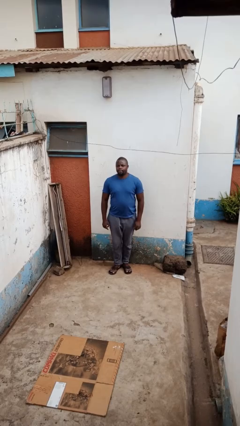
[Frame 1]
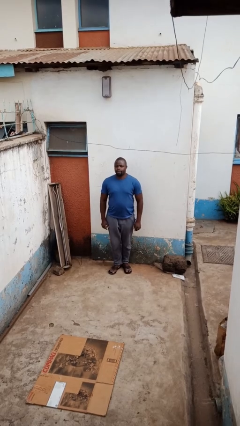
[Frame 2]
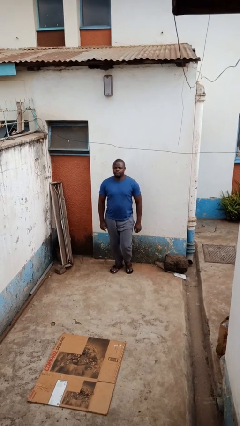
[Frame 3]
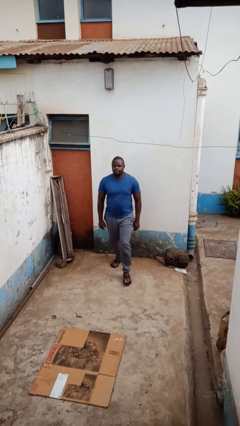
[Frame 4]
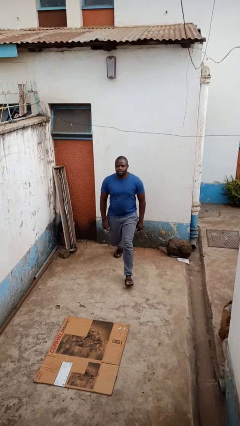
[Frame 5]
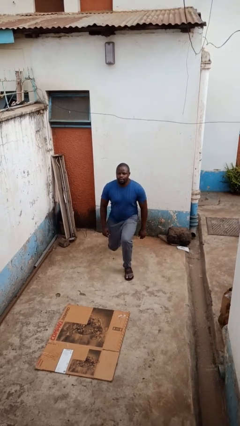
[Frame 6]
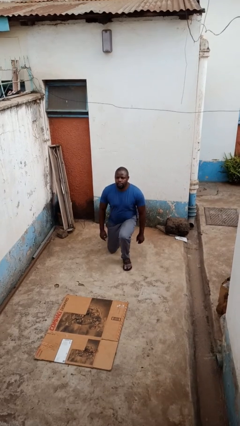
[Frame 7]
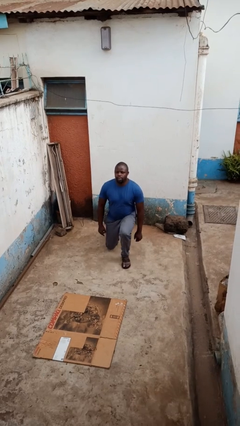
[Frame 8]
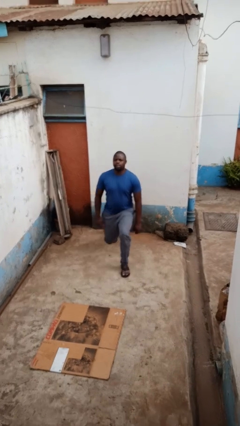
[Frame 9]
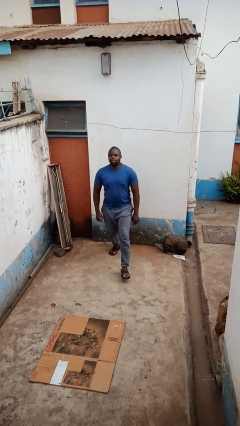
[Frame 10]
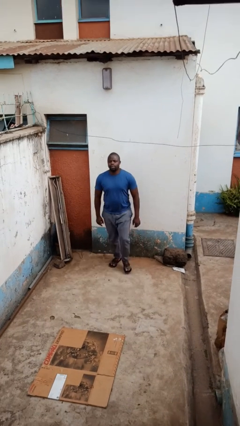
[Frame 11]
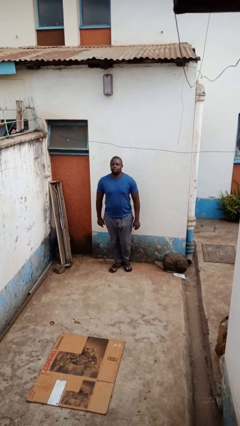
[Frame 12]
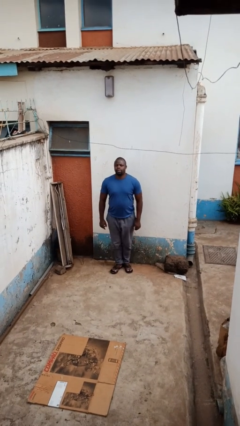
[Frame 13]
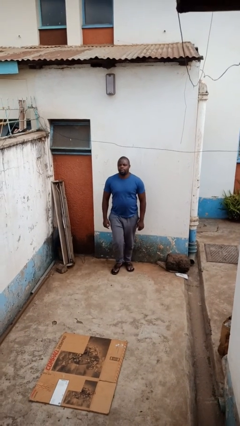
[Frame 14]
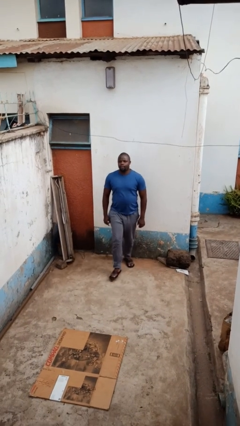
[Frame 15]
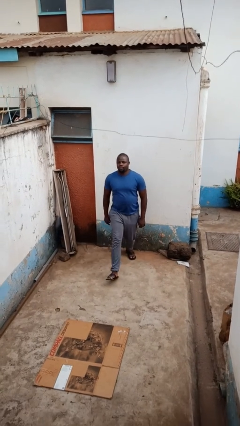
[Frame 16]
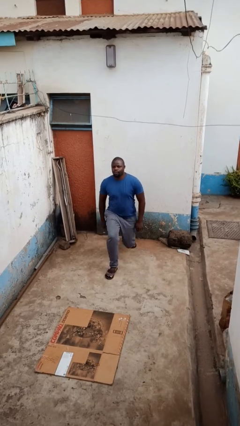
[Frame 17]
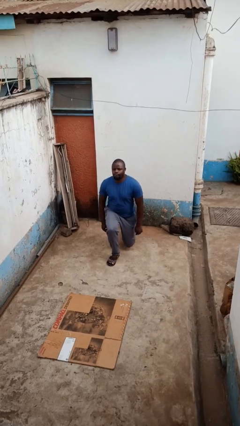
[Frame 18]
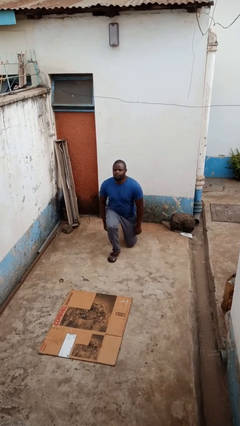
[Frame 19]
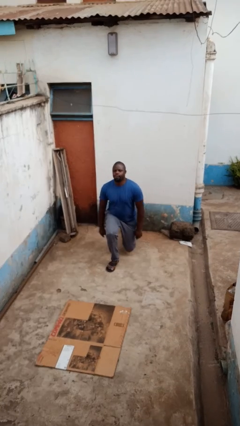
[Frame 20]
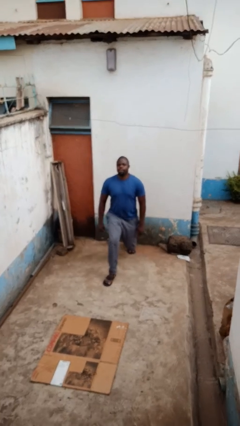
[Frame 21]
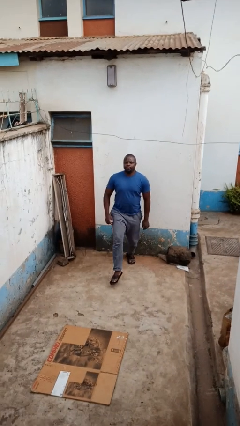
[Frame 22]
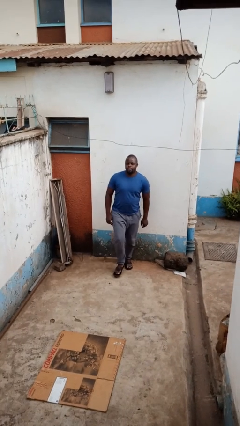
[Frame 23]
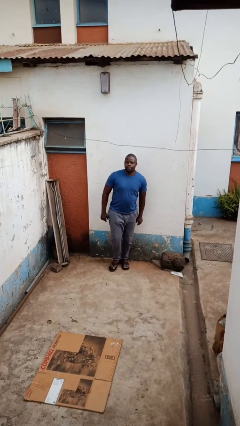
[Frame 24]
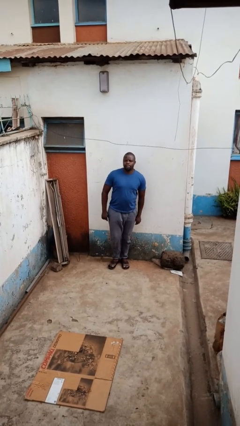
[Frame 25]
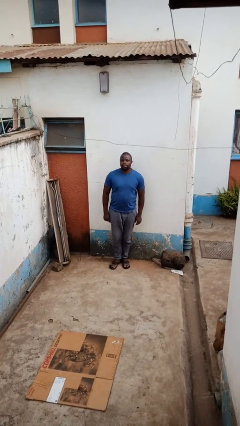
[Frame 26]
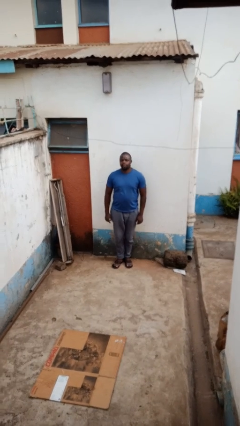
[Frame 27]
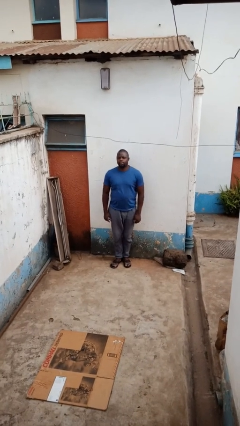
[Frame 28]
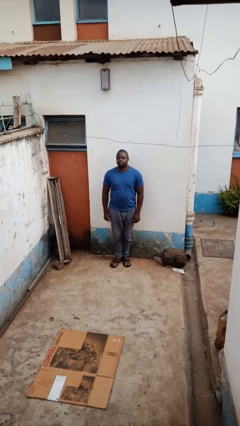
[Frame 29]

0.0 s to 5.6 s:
person exercises with lunges

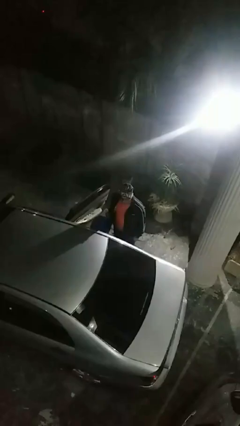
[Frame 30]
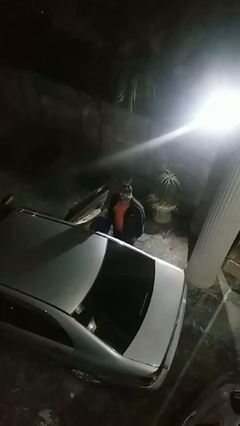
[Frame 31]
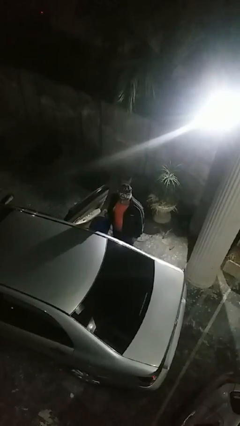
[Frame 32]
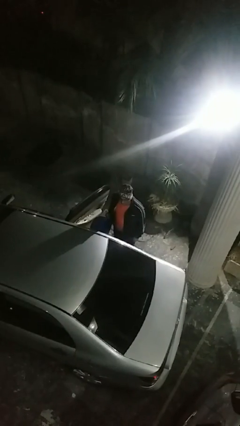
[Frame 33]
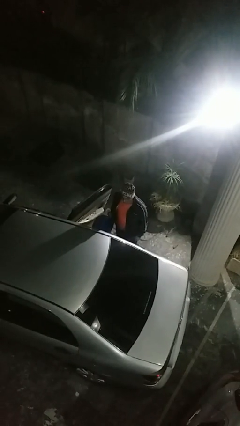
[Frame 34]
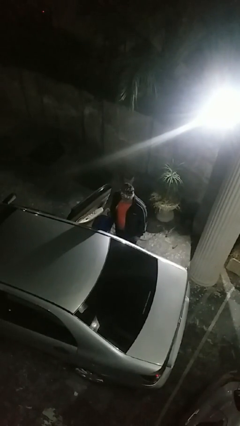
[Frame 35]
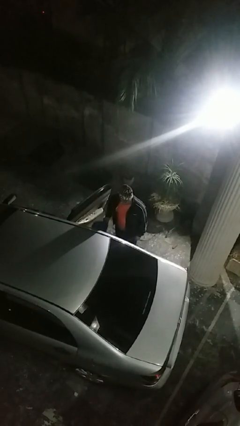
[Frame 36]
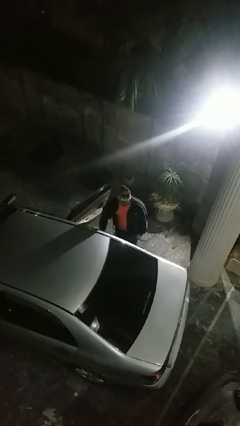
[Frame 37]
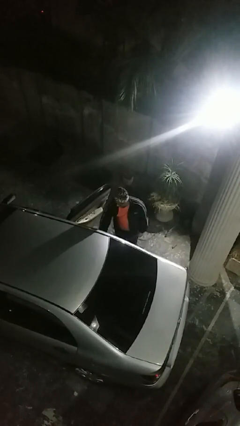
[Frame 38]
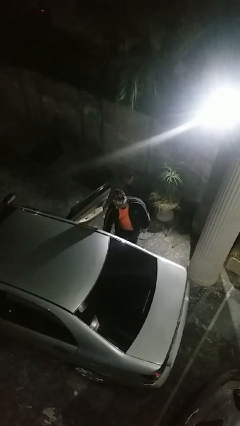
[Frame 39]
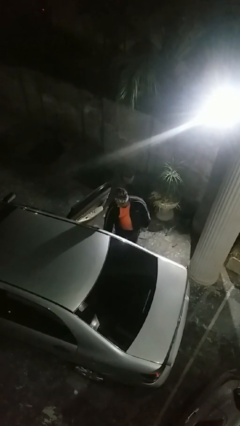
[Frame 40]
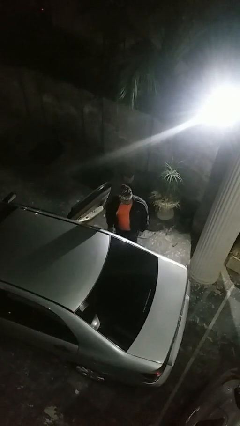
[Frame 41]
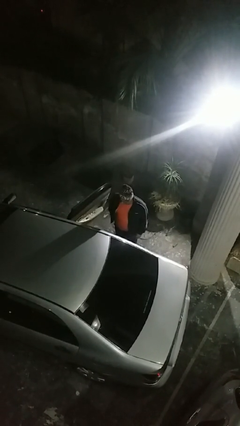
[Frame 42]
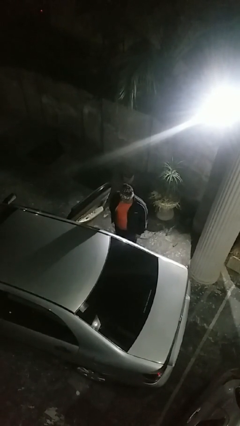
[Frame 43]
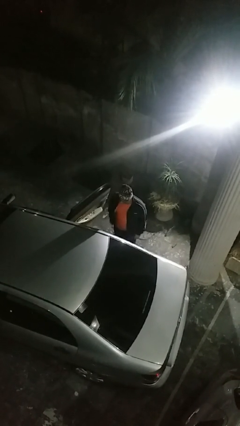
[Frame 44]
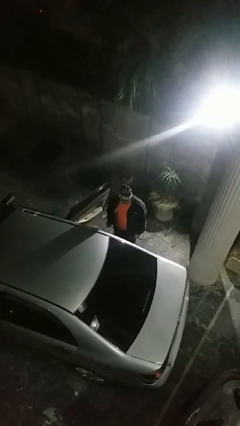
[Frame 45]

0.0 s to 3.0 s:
person loads car

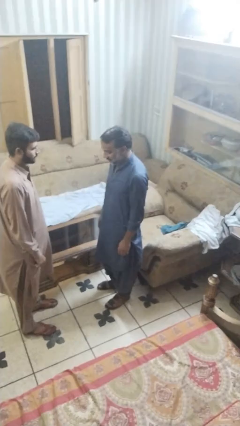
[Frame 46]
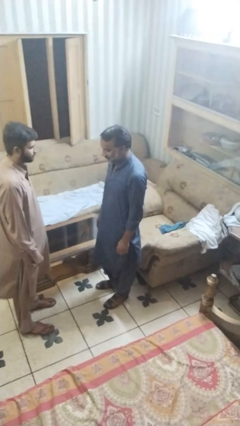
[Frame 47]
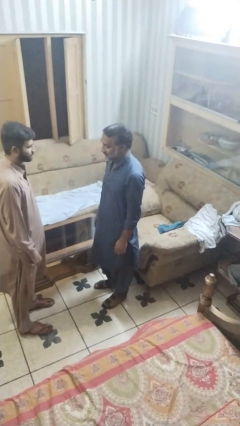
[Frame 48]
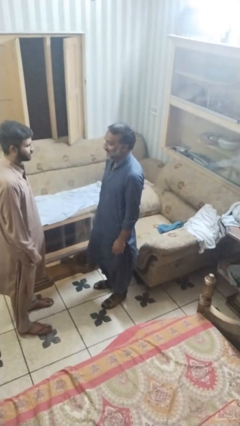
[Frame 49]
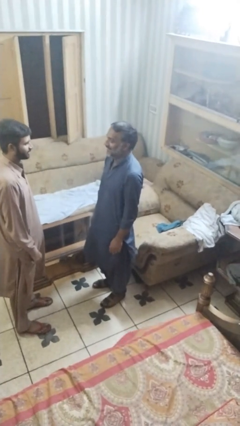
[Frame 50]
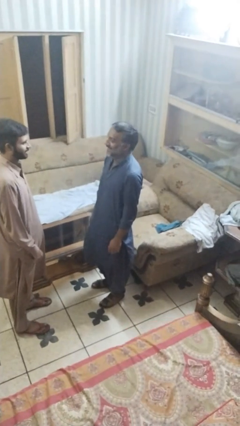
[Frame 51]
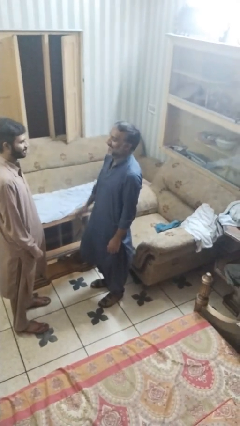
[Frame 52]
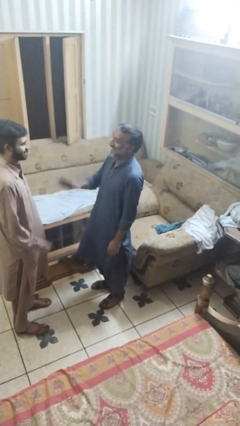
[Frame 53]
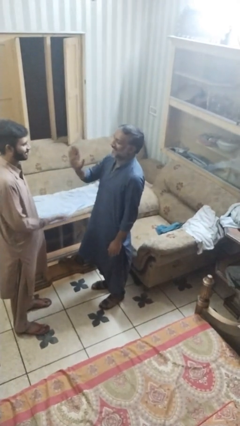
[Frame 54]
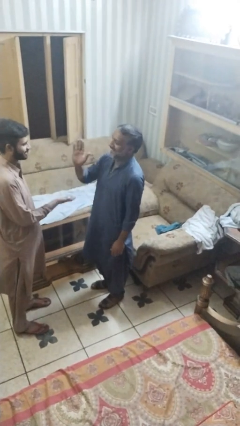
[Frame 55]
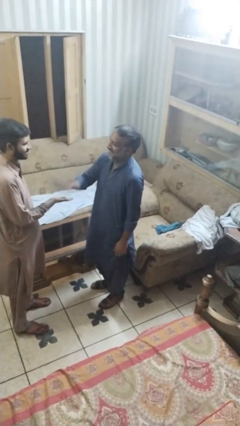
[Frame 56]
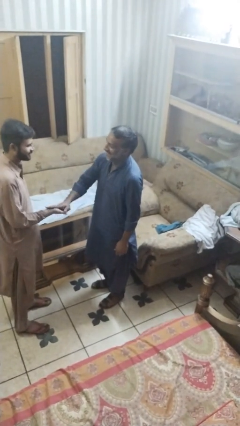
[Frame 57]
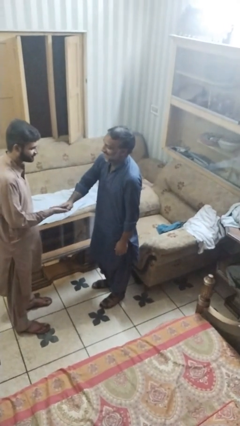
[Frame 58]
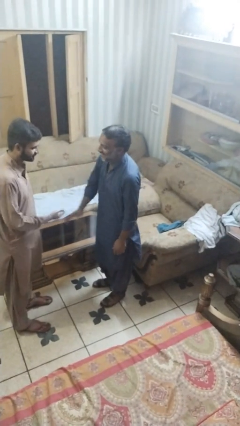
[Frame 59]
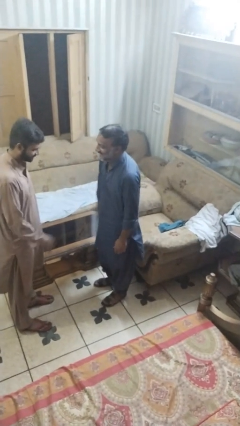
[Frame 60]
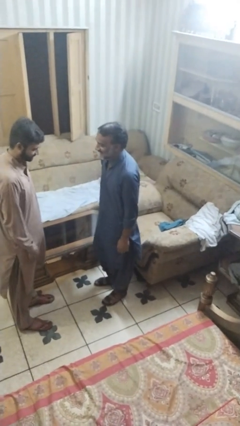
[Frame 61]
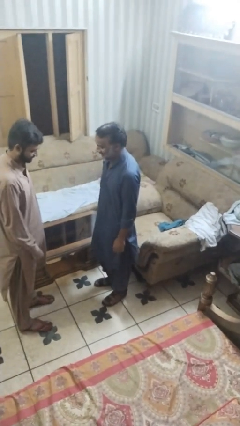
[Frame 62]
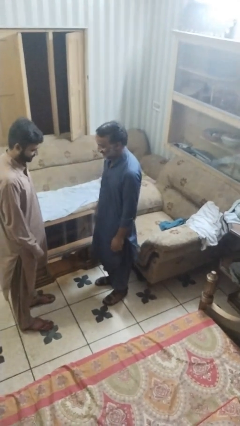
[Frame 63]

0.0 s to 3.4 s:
person laughs with person

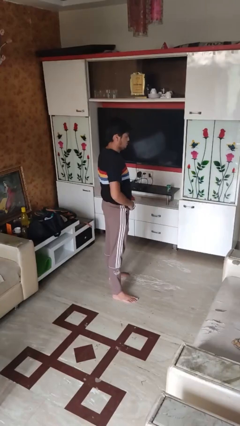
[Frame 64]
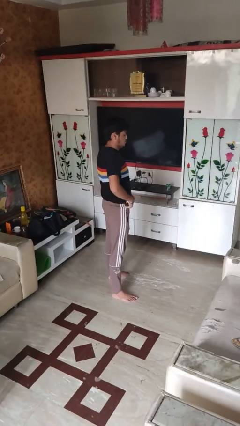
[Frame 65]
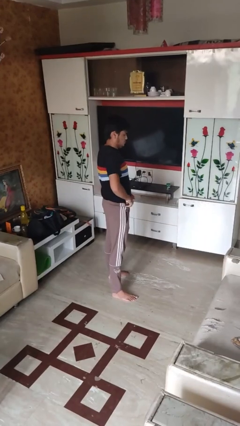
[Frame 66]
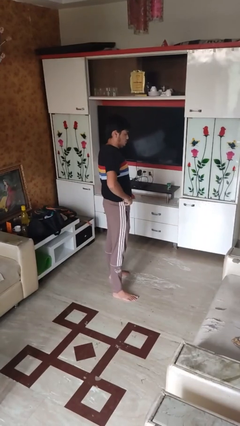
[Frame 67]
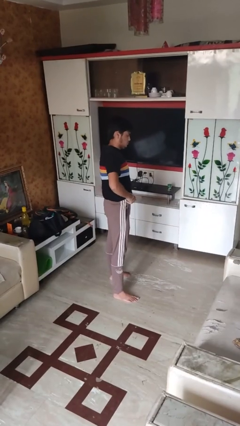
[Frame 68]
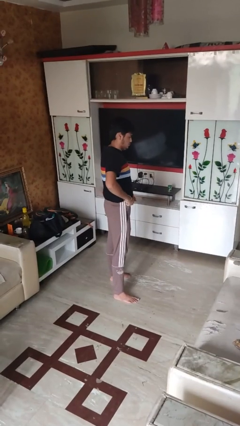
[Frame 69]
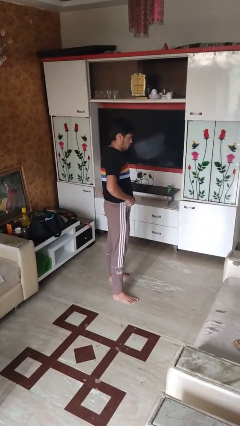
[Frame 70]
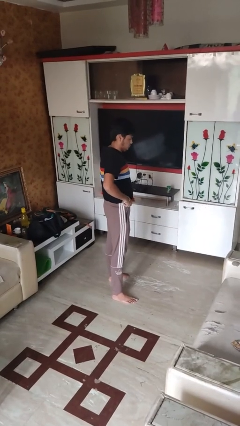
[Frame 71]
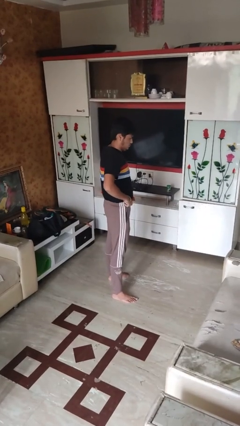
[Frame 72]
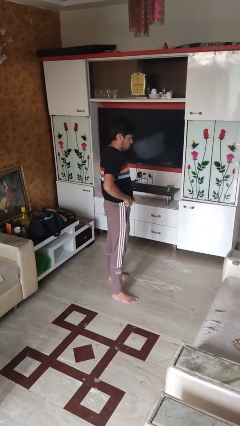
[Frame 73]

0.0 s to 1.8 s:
person hikes up pants

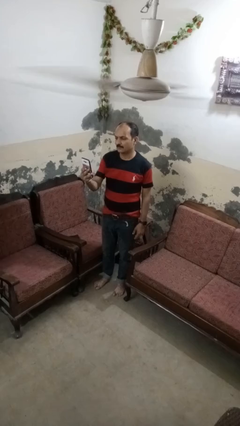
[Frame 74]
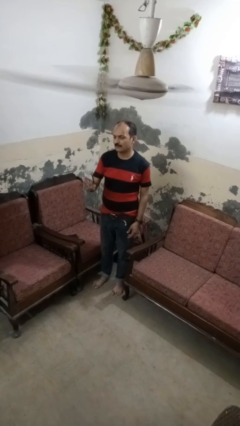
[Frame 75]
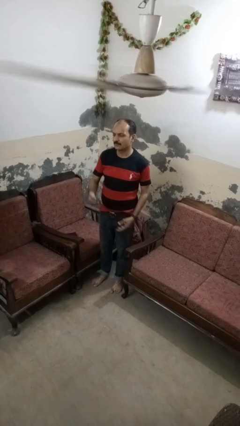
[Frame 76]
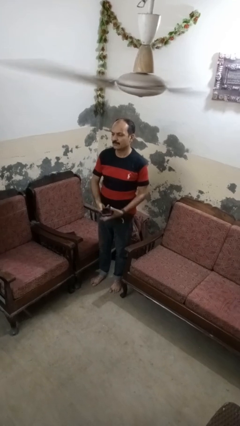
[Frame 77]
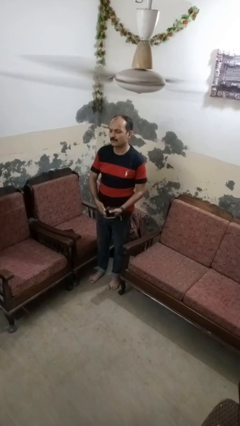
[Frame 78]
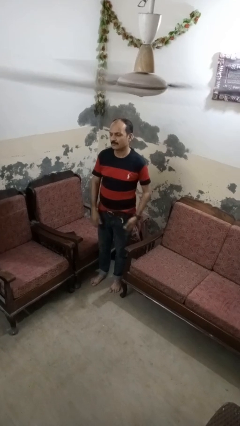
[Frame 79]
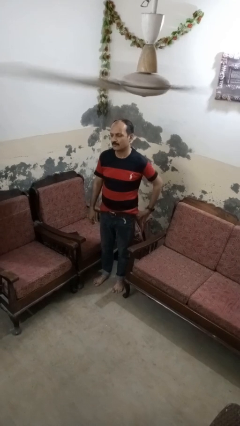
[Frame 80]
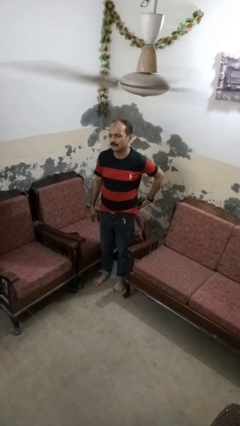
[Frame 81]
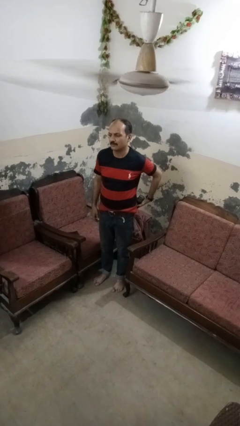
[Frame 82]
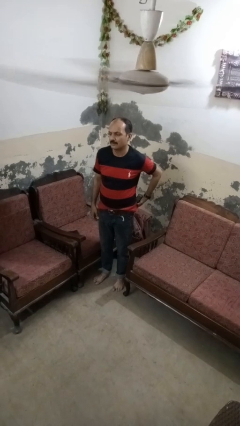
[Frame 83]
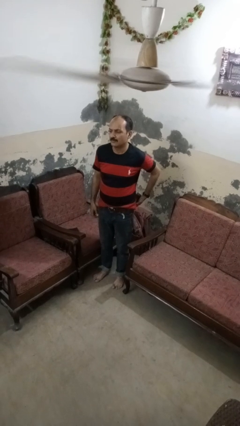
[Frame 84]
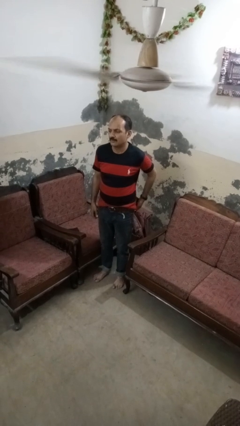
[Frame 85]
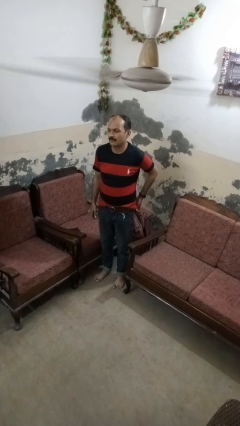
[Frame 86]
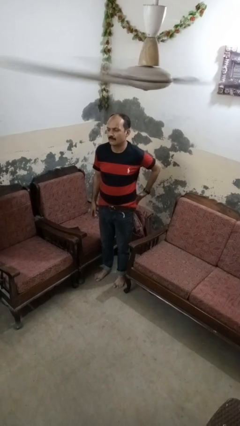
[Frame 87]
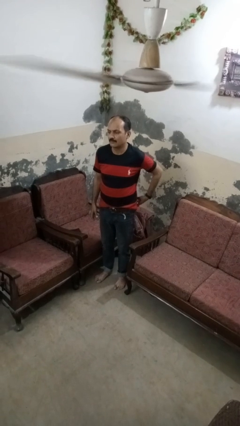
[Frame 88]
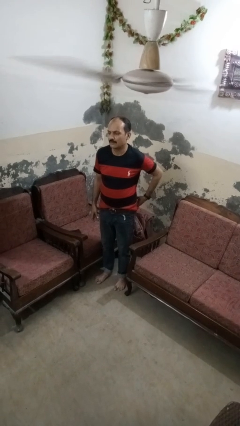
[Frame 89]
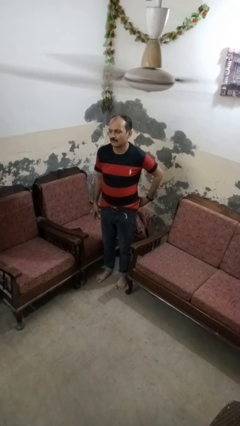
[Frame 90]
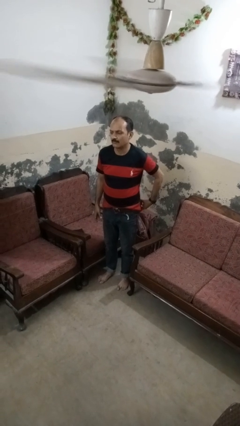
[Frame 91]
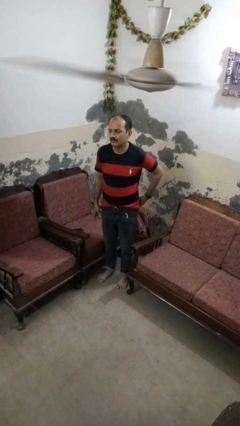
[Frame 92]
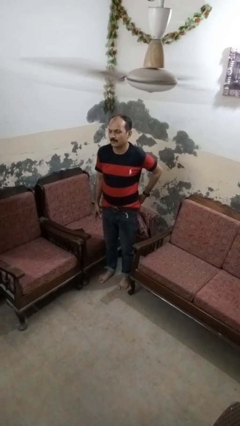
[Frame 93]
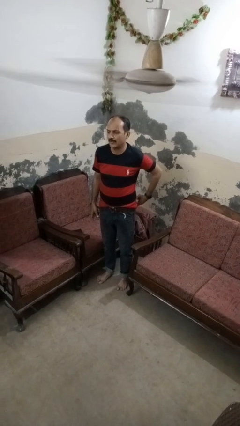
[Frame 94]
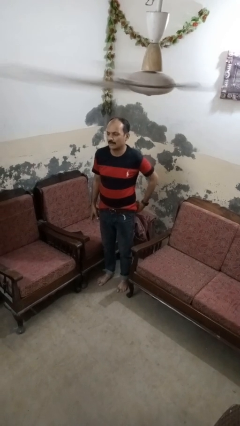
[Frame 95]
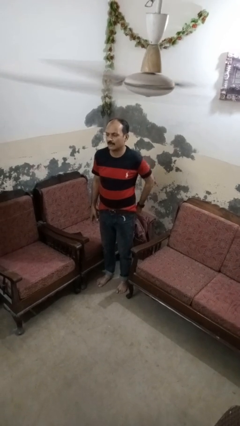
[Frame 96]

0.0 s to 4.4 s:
person puts phone into pocket
